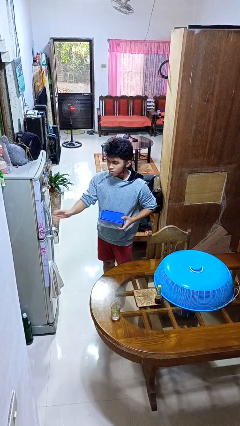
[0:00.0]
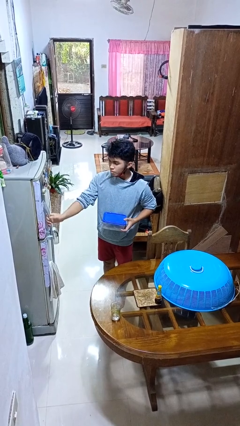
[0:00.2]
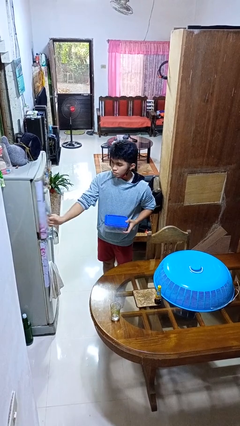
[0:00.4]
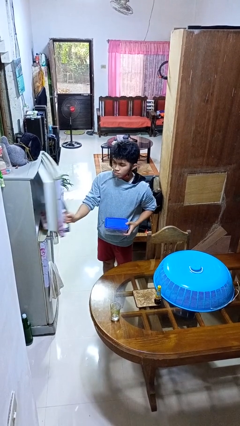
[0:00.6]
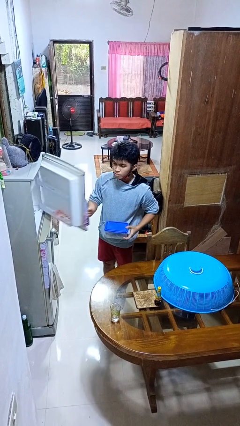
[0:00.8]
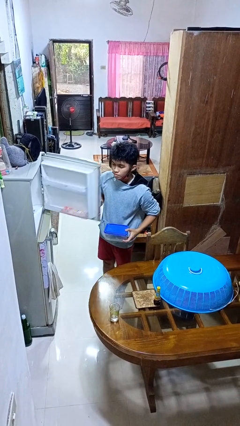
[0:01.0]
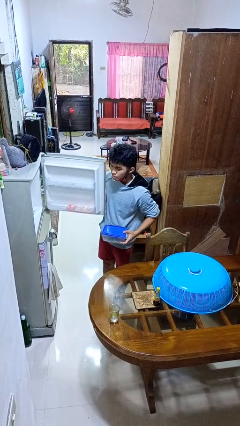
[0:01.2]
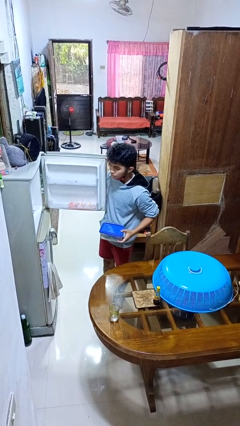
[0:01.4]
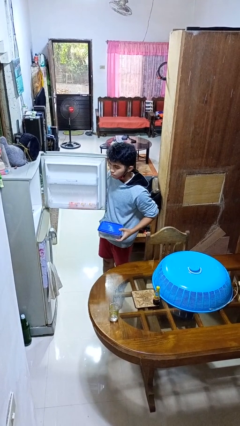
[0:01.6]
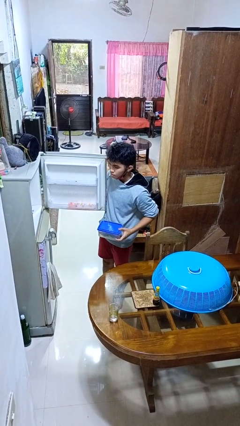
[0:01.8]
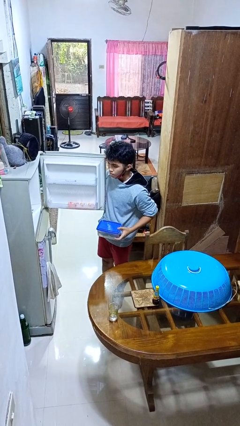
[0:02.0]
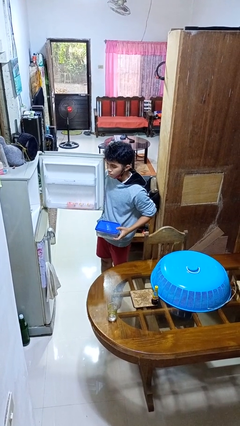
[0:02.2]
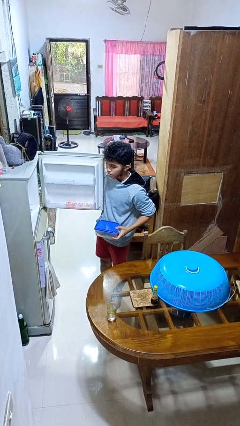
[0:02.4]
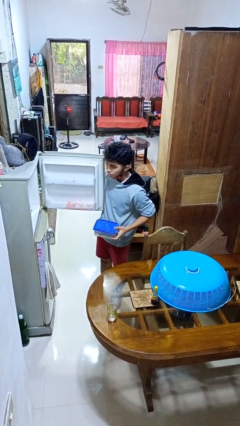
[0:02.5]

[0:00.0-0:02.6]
person opens refrigerator

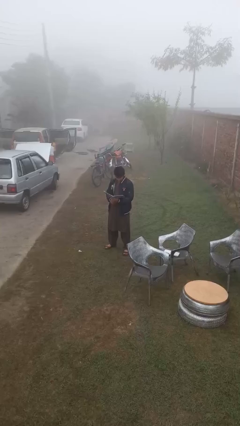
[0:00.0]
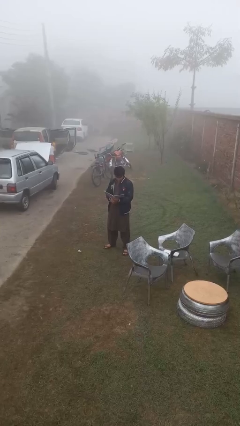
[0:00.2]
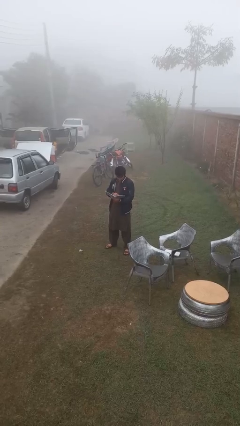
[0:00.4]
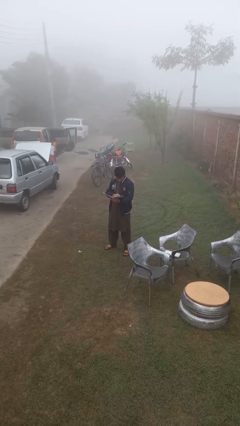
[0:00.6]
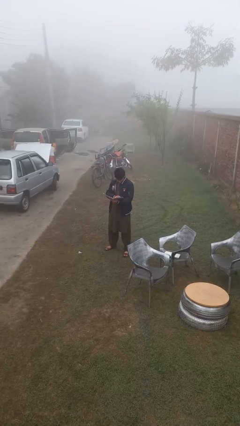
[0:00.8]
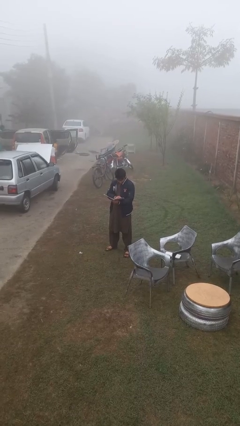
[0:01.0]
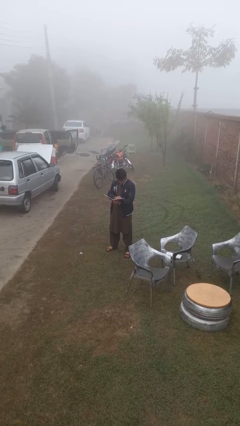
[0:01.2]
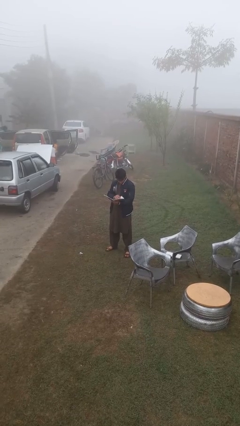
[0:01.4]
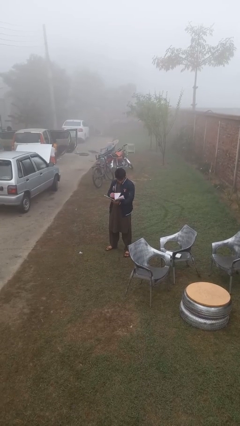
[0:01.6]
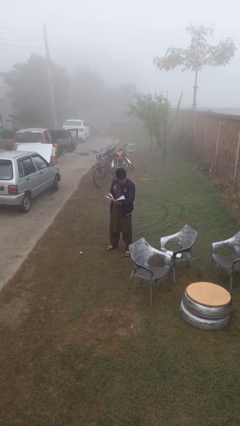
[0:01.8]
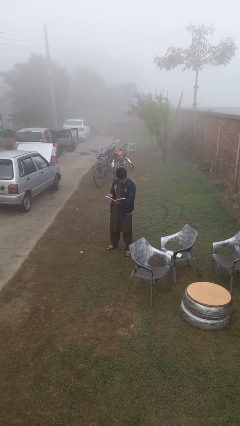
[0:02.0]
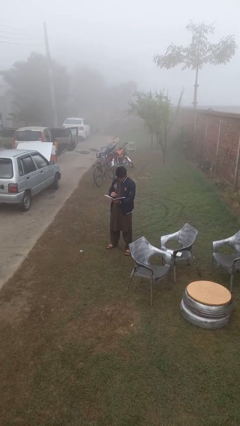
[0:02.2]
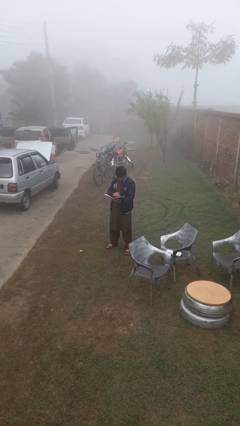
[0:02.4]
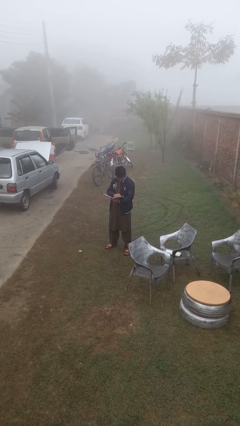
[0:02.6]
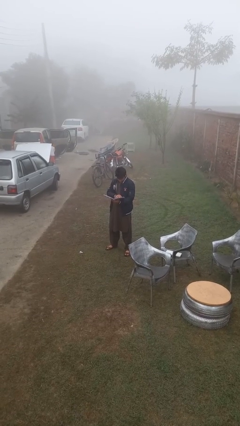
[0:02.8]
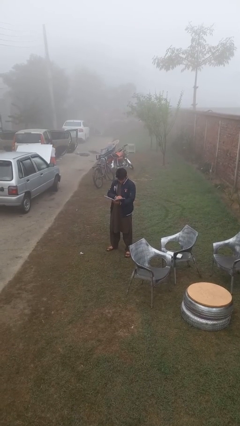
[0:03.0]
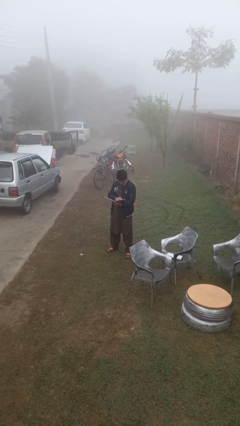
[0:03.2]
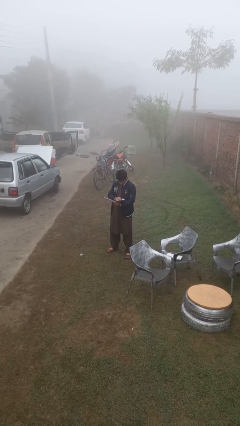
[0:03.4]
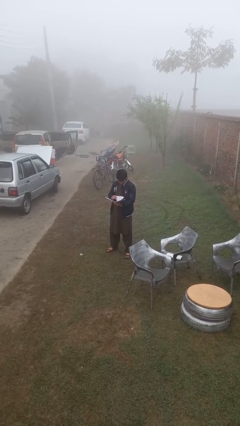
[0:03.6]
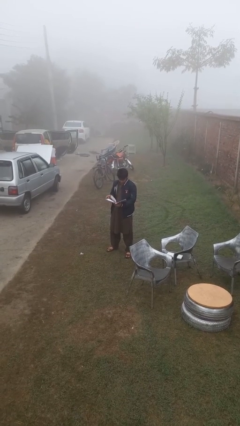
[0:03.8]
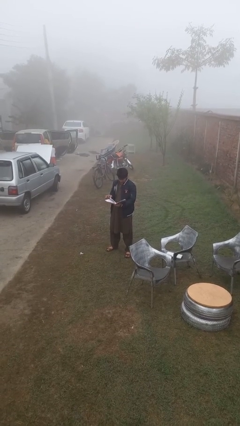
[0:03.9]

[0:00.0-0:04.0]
person reads document

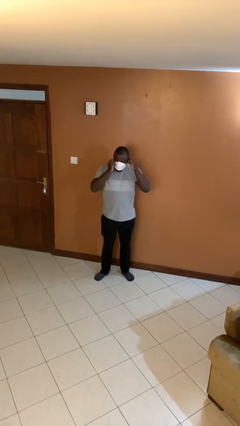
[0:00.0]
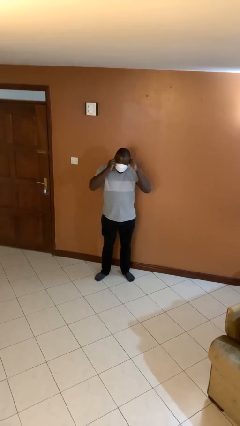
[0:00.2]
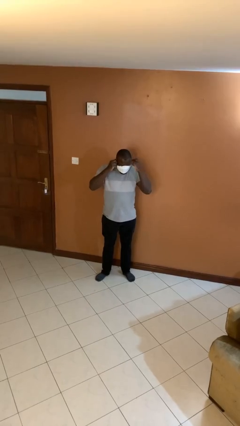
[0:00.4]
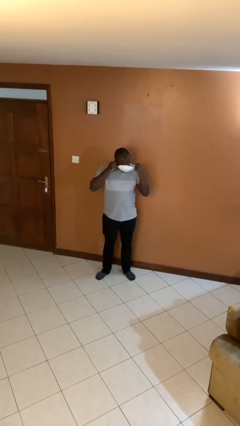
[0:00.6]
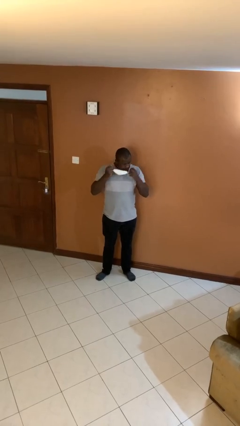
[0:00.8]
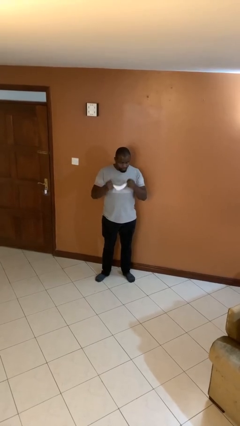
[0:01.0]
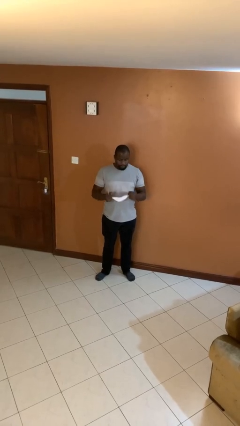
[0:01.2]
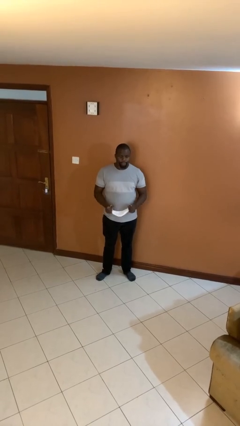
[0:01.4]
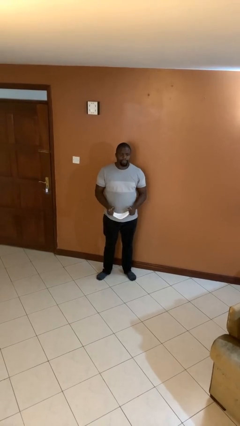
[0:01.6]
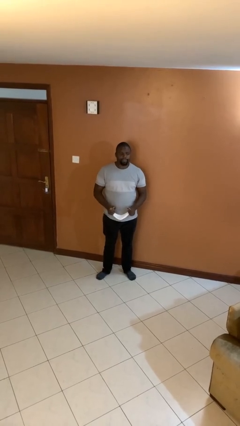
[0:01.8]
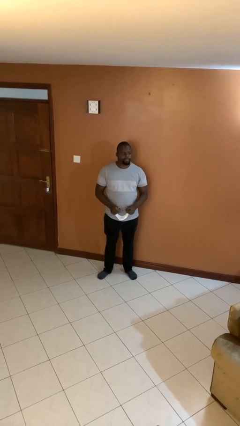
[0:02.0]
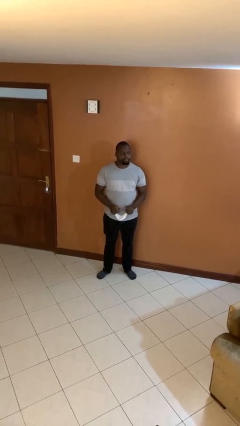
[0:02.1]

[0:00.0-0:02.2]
person takes off facemask

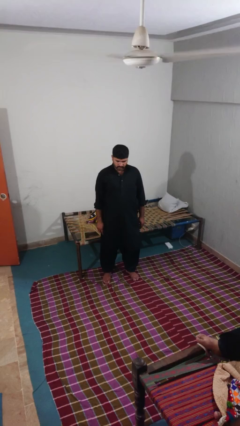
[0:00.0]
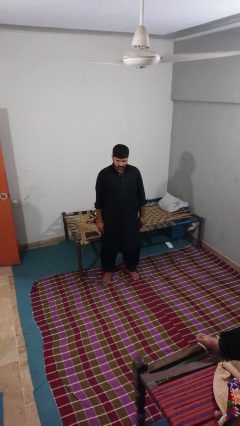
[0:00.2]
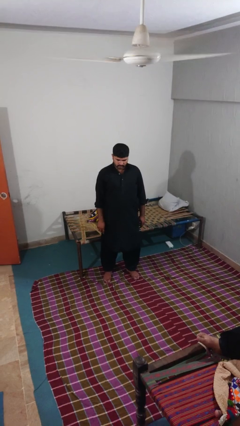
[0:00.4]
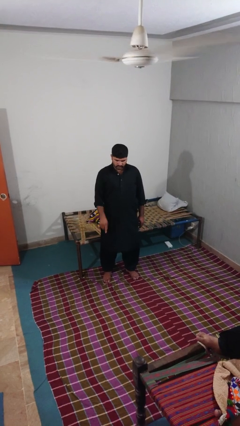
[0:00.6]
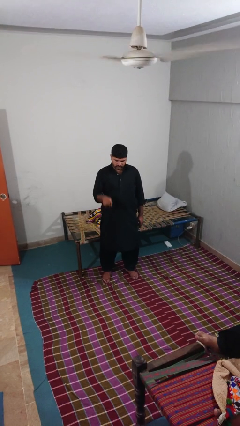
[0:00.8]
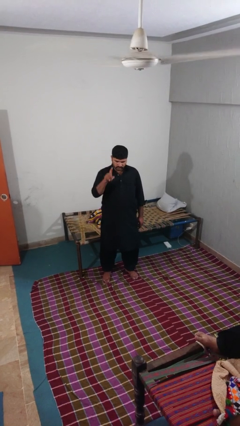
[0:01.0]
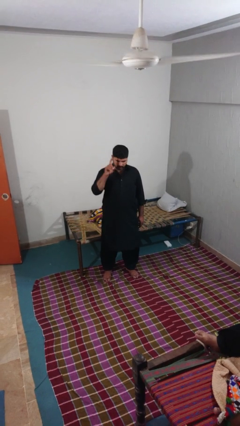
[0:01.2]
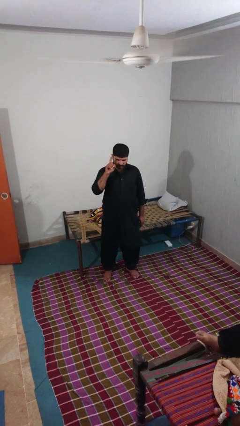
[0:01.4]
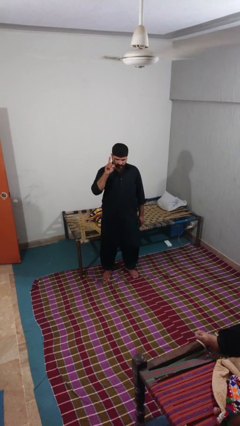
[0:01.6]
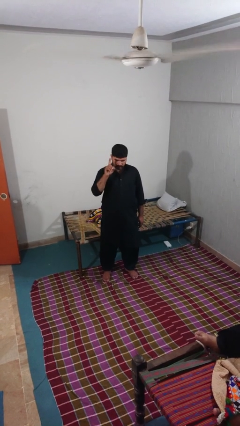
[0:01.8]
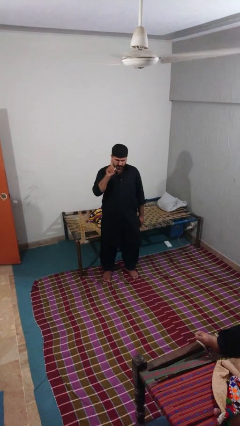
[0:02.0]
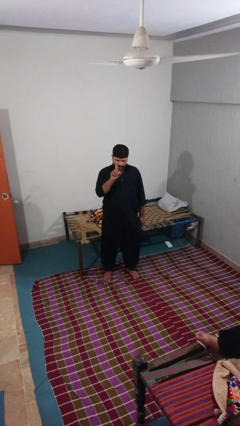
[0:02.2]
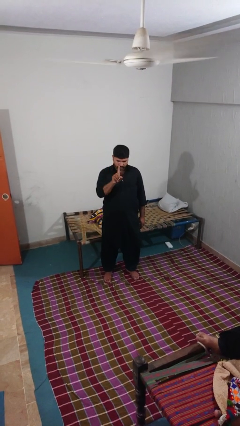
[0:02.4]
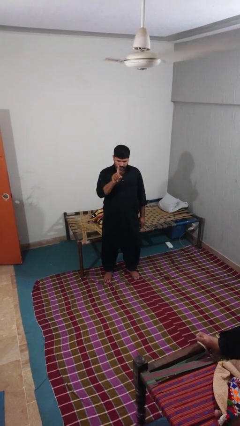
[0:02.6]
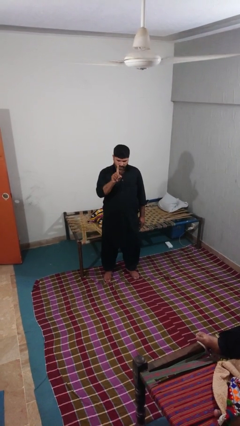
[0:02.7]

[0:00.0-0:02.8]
person gestures swipe up

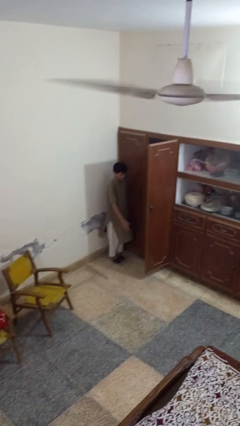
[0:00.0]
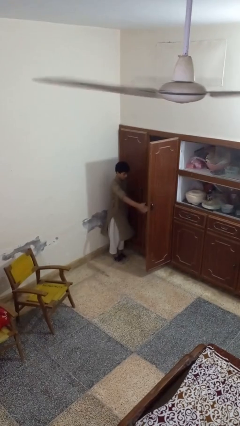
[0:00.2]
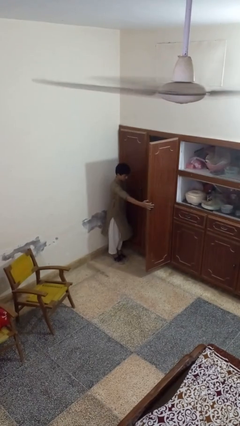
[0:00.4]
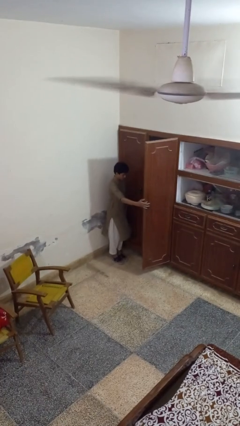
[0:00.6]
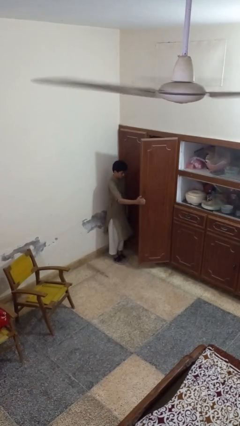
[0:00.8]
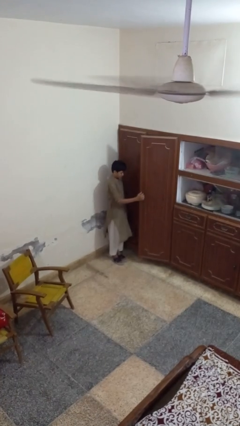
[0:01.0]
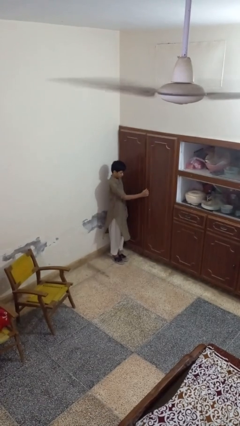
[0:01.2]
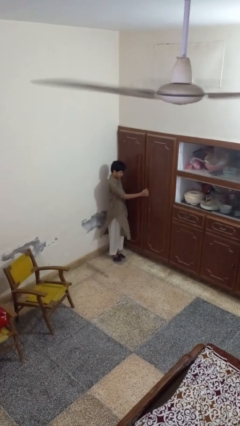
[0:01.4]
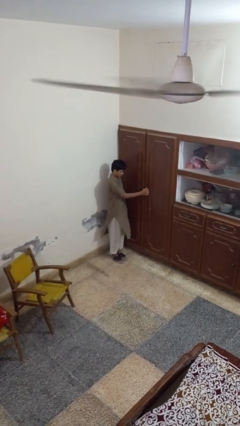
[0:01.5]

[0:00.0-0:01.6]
person closes closet door

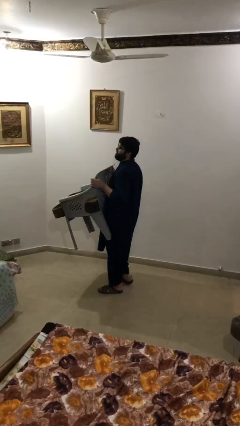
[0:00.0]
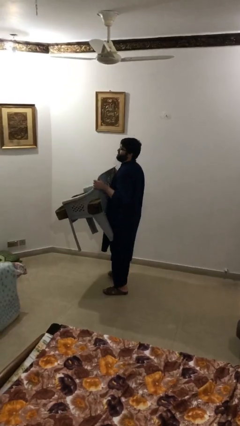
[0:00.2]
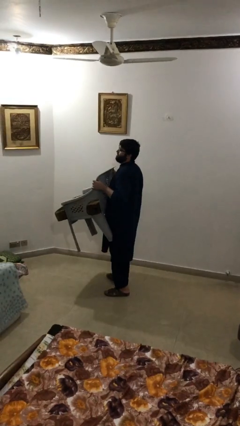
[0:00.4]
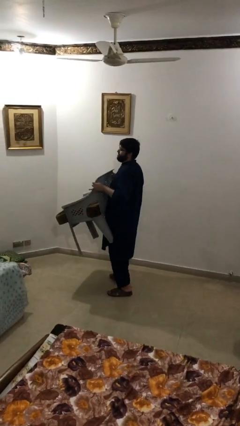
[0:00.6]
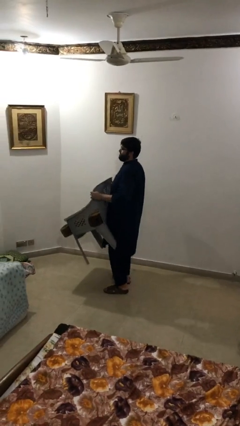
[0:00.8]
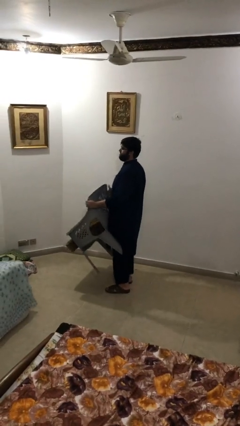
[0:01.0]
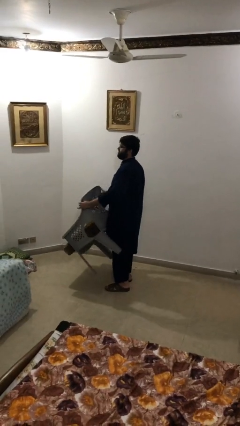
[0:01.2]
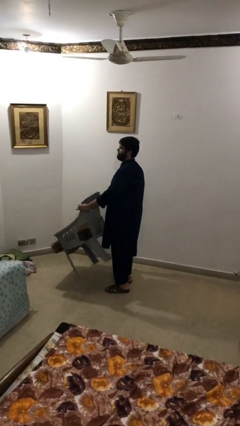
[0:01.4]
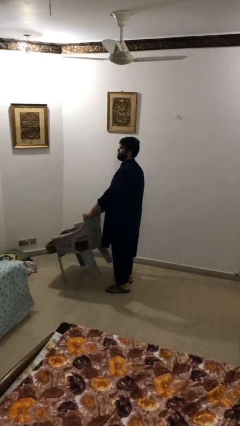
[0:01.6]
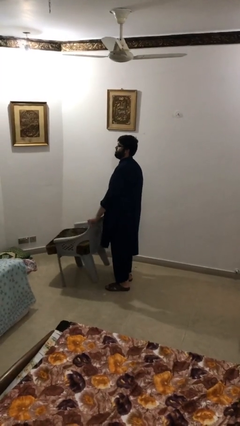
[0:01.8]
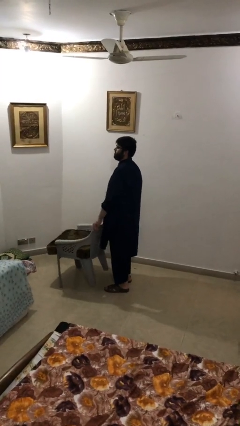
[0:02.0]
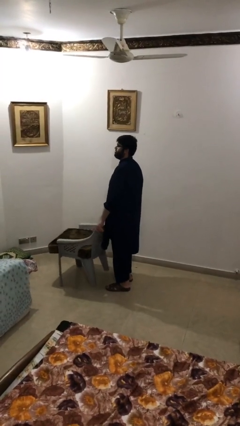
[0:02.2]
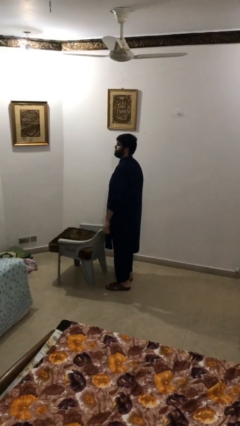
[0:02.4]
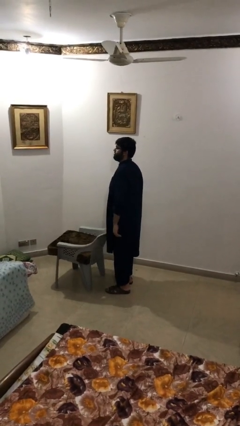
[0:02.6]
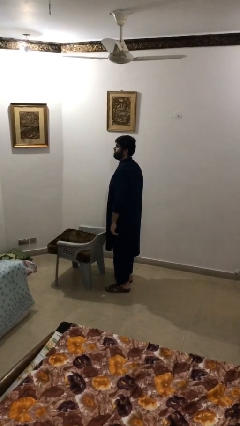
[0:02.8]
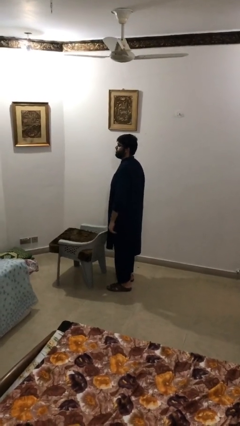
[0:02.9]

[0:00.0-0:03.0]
person puts down object on floor

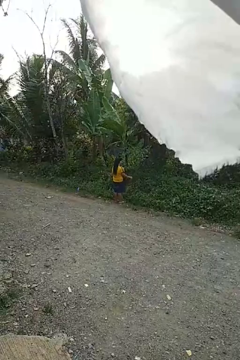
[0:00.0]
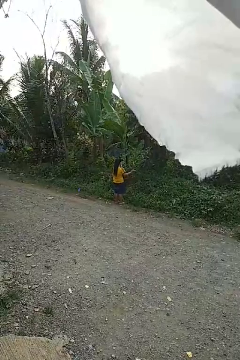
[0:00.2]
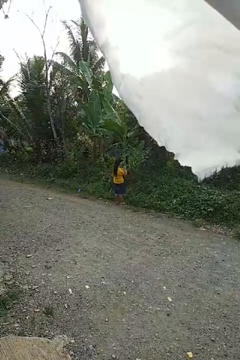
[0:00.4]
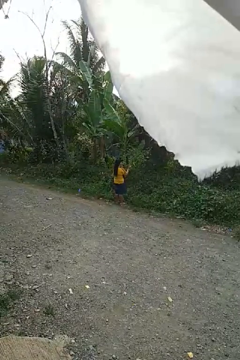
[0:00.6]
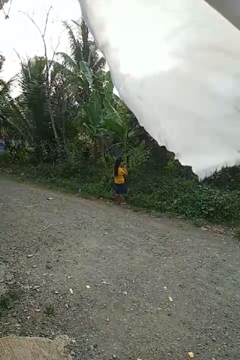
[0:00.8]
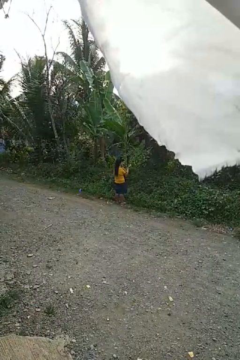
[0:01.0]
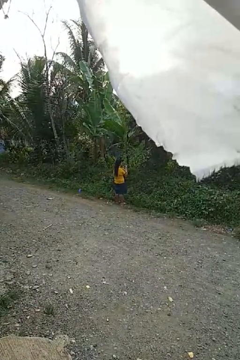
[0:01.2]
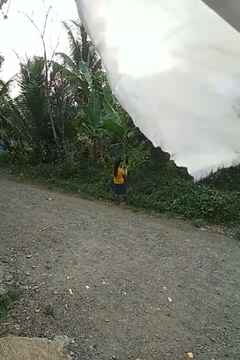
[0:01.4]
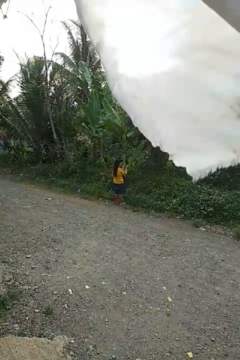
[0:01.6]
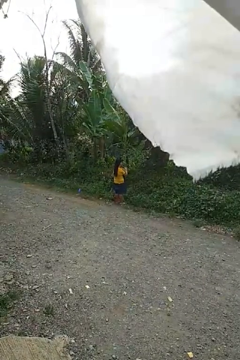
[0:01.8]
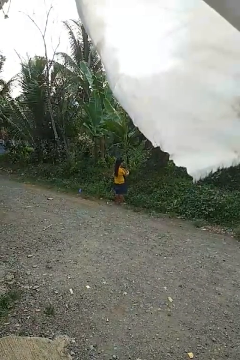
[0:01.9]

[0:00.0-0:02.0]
person claps hands
